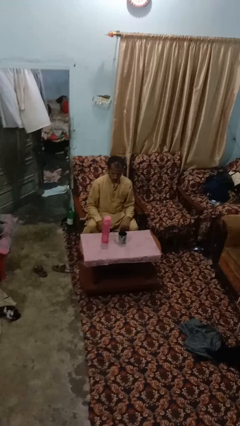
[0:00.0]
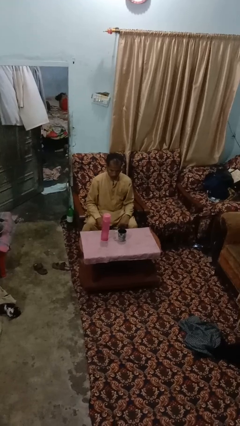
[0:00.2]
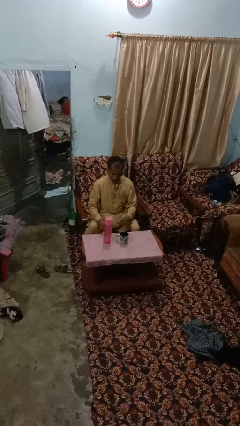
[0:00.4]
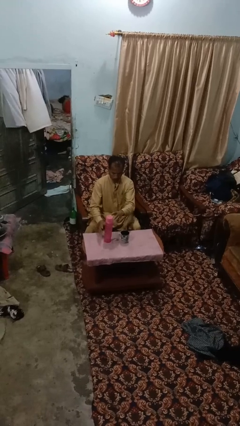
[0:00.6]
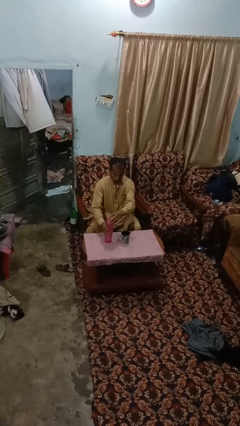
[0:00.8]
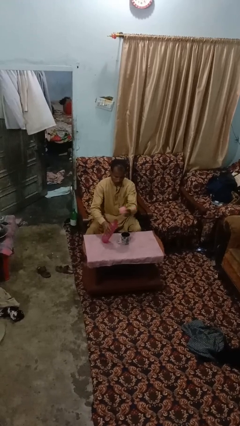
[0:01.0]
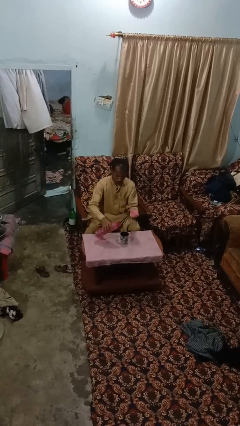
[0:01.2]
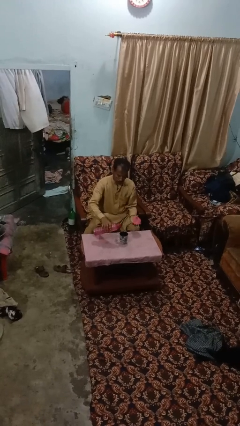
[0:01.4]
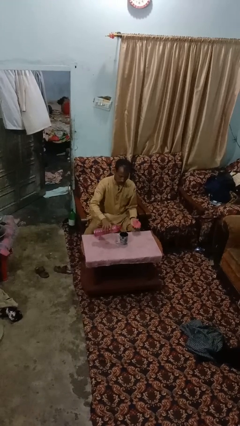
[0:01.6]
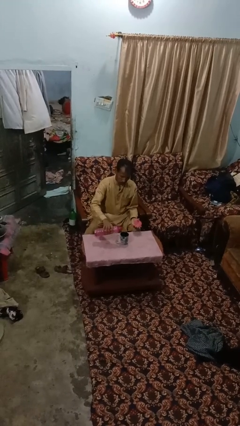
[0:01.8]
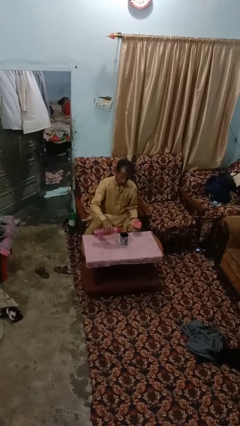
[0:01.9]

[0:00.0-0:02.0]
person pours liquid into cup

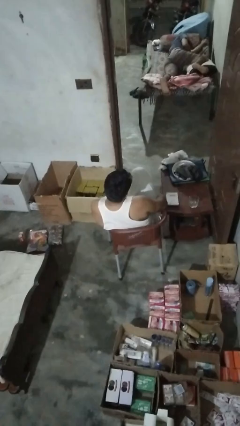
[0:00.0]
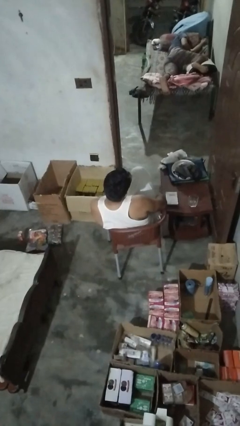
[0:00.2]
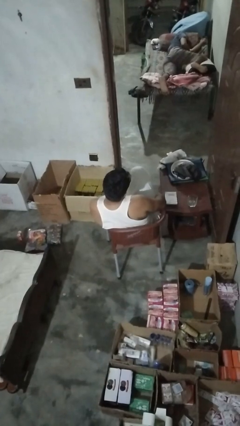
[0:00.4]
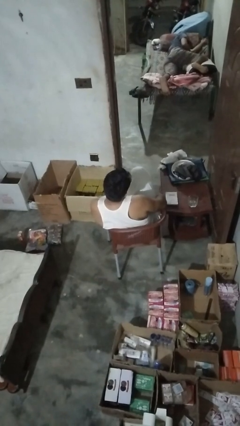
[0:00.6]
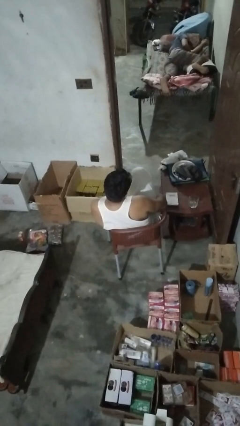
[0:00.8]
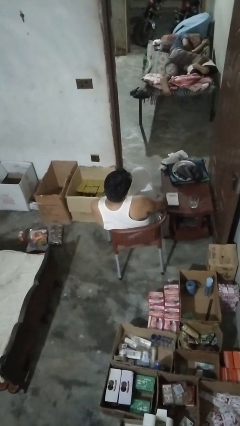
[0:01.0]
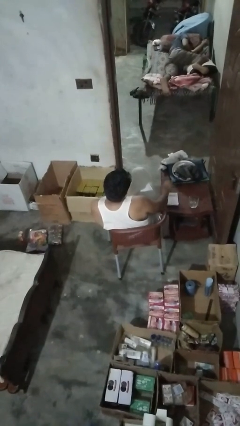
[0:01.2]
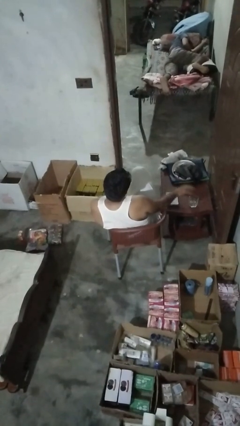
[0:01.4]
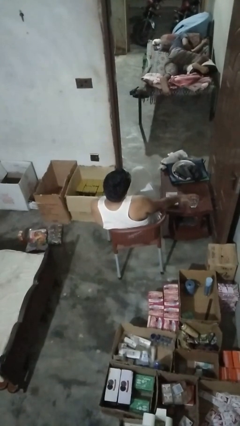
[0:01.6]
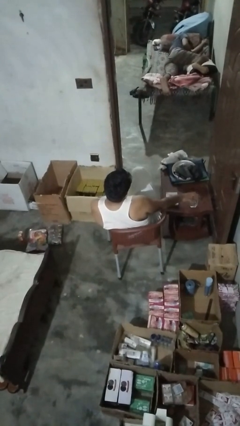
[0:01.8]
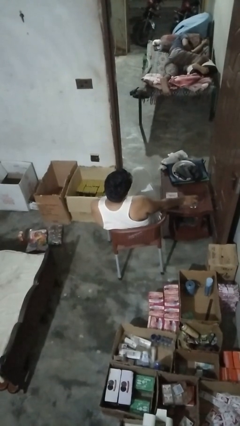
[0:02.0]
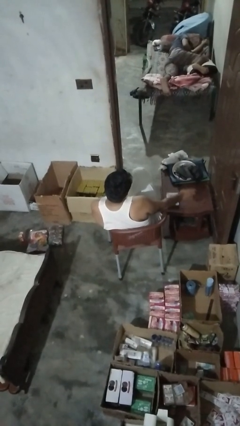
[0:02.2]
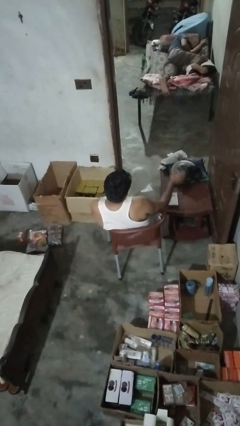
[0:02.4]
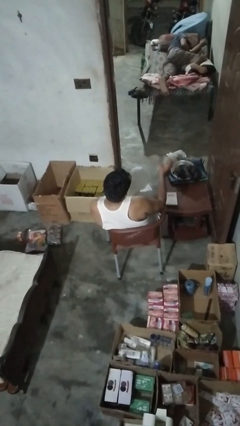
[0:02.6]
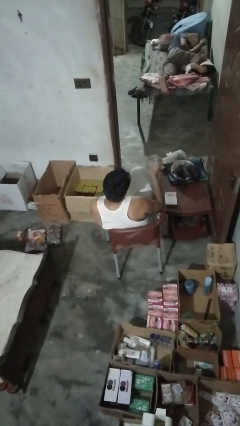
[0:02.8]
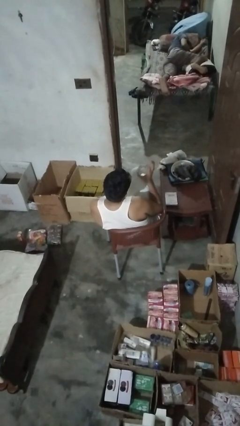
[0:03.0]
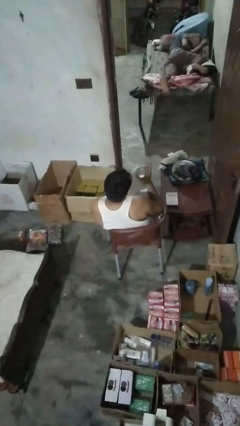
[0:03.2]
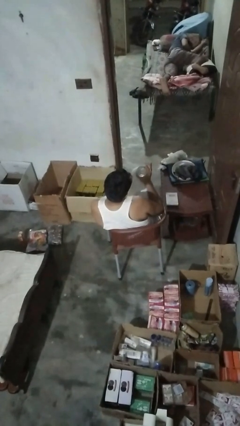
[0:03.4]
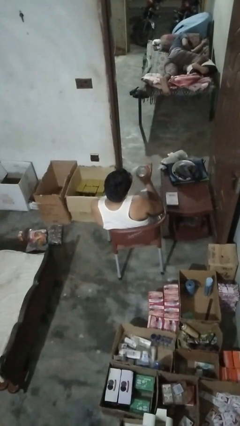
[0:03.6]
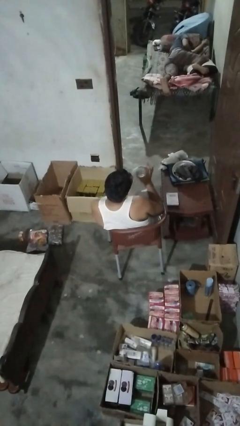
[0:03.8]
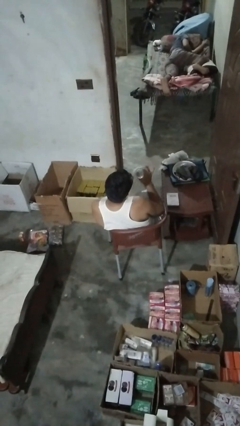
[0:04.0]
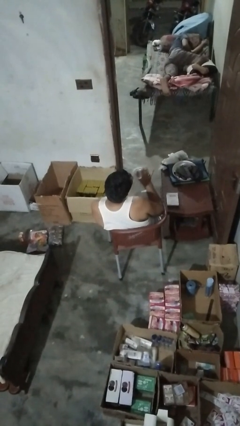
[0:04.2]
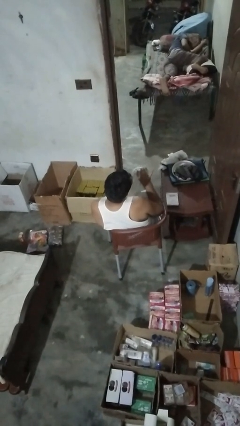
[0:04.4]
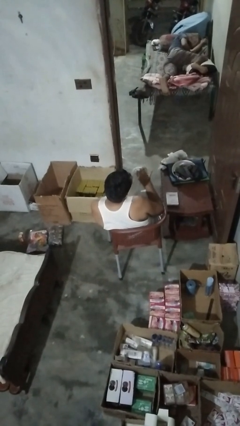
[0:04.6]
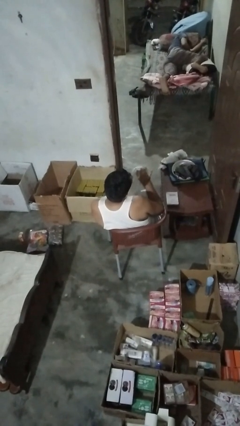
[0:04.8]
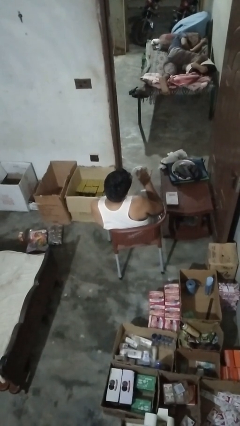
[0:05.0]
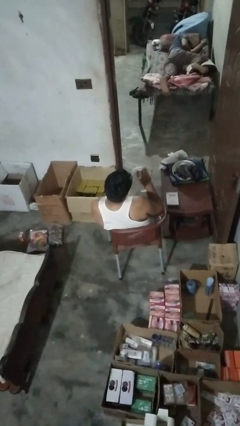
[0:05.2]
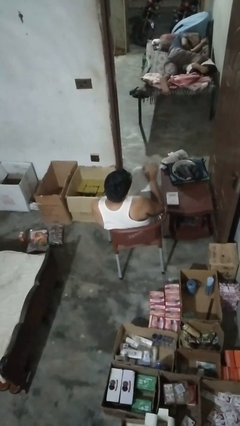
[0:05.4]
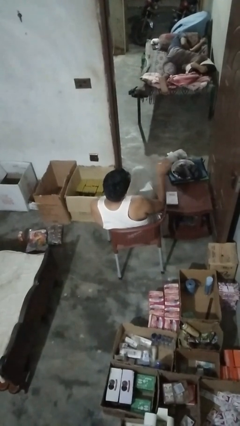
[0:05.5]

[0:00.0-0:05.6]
person knocks over glass

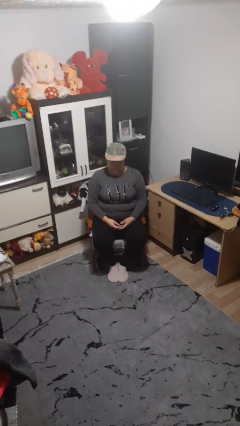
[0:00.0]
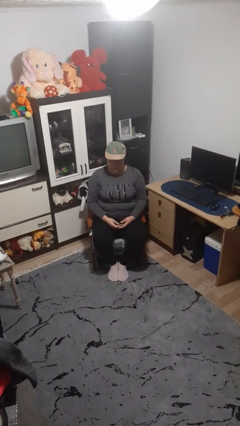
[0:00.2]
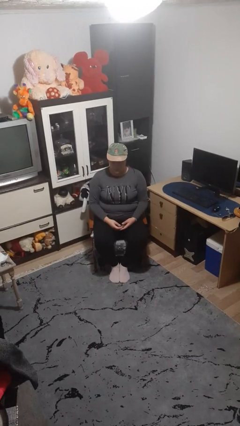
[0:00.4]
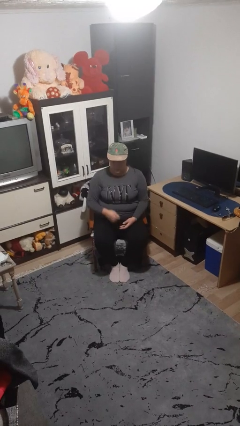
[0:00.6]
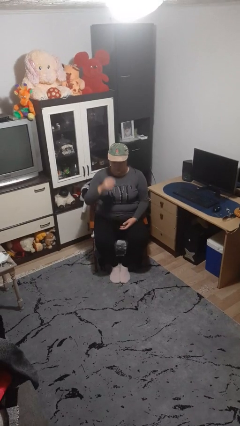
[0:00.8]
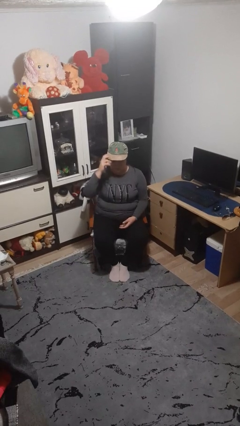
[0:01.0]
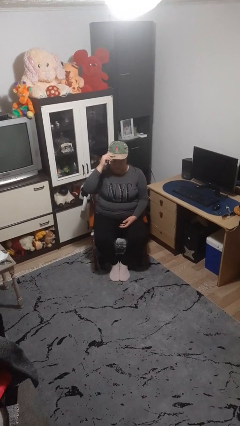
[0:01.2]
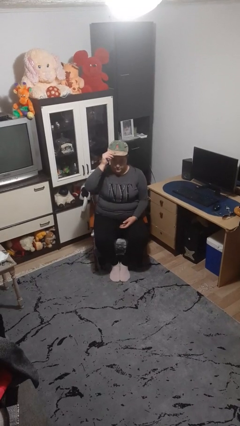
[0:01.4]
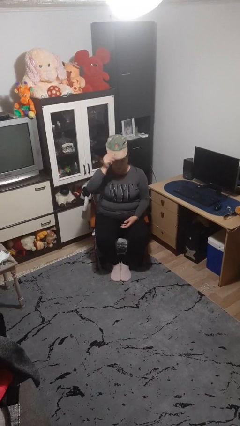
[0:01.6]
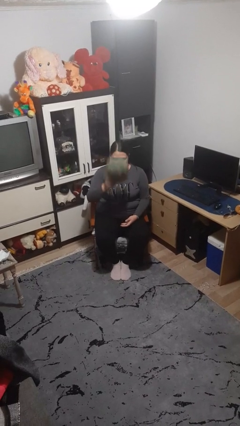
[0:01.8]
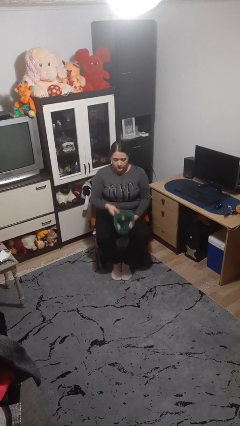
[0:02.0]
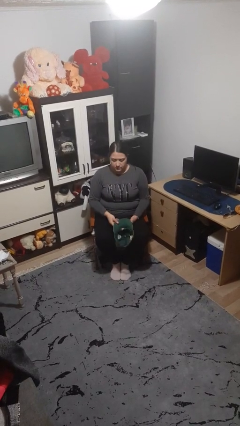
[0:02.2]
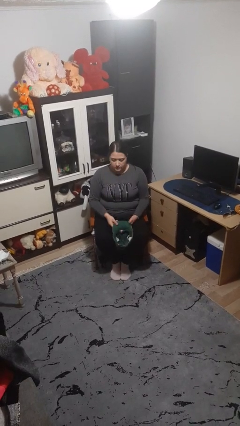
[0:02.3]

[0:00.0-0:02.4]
person takes off hat

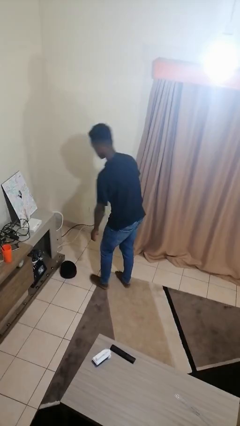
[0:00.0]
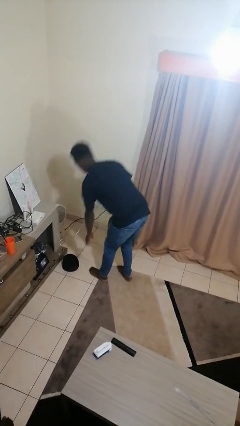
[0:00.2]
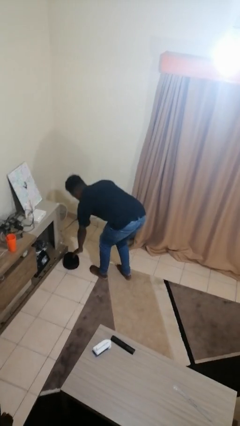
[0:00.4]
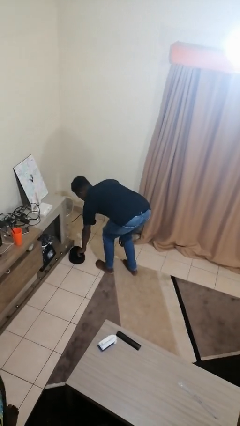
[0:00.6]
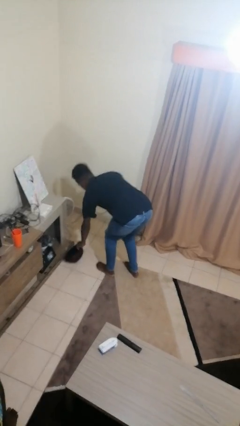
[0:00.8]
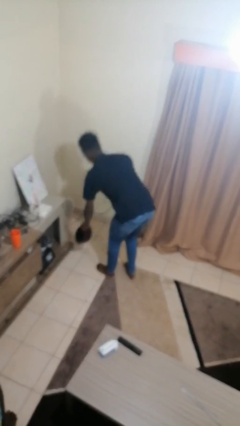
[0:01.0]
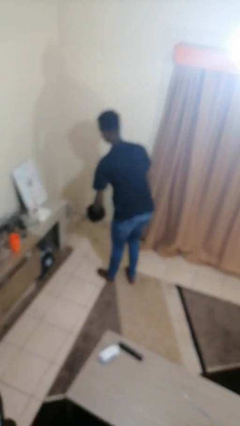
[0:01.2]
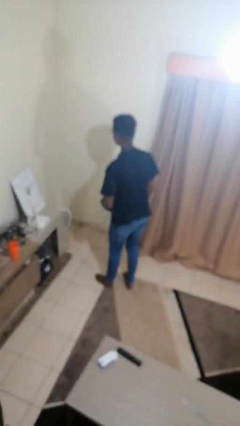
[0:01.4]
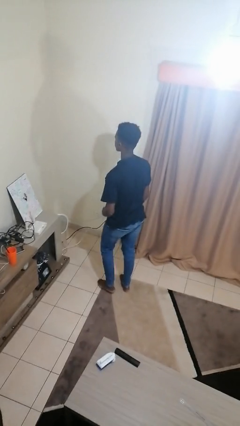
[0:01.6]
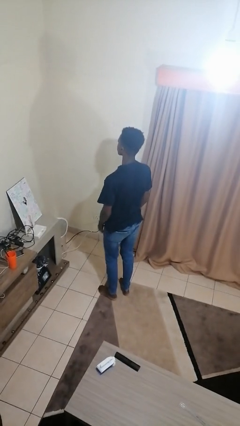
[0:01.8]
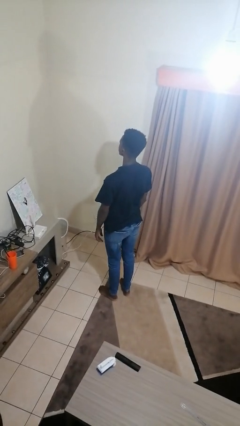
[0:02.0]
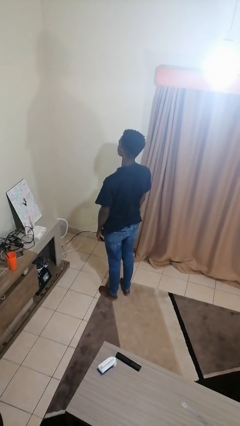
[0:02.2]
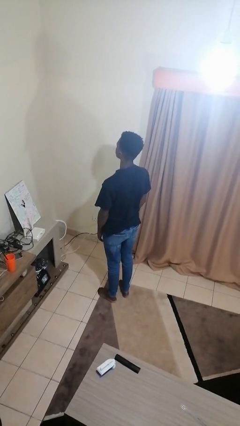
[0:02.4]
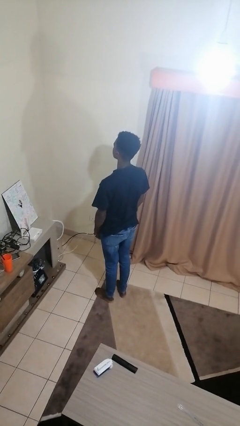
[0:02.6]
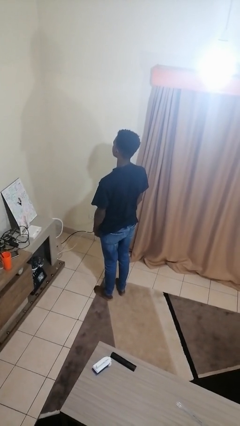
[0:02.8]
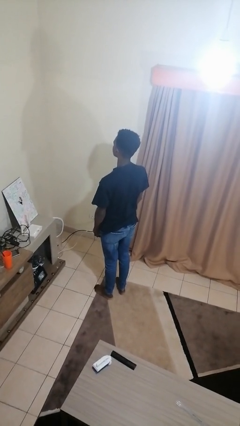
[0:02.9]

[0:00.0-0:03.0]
person picks up object from floor

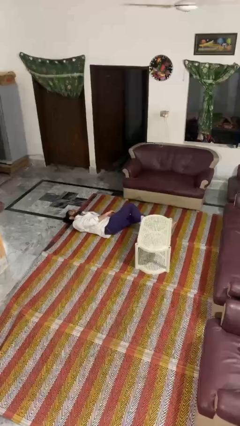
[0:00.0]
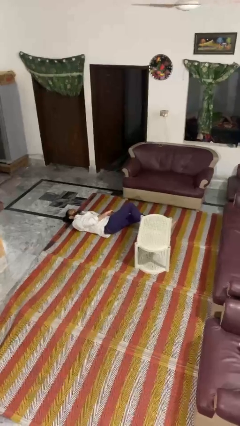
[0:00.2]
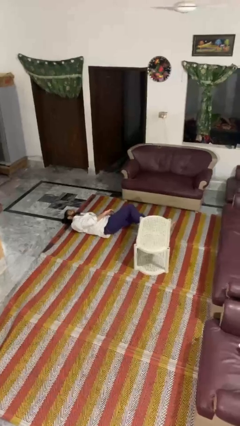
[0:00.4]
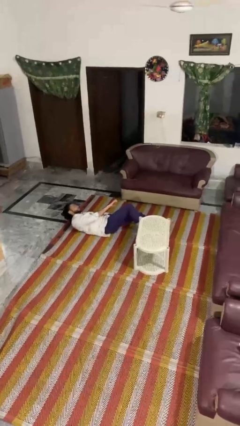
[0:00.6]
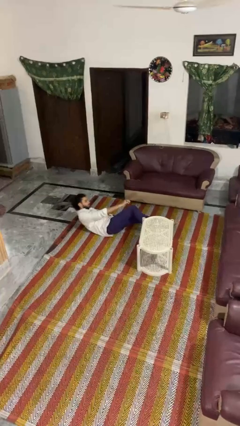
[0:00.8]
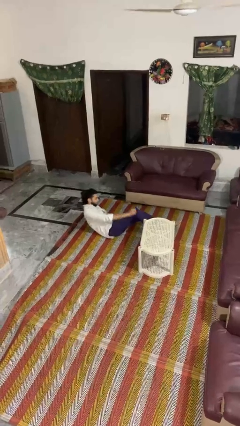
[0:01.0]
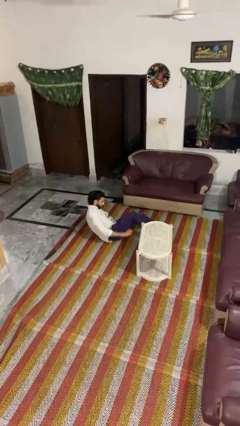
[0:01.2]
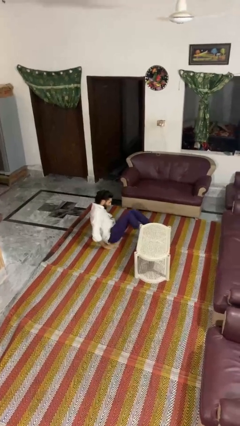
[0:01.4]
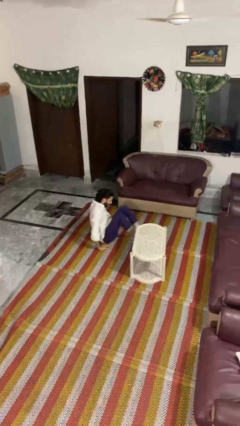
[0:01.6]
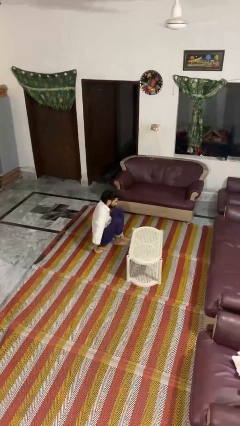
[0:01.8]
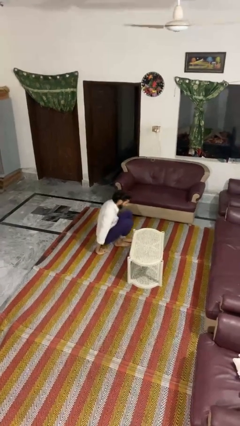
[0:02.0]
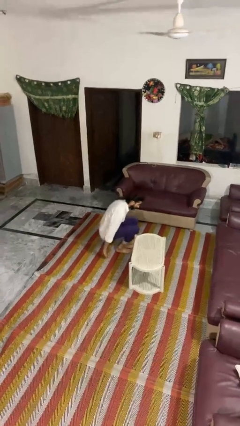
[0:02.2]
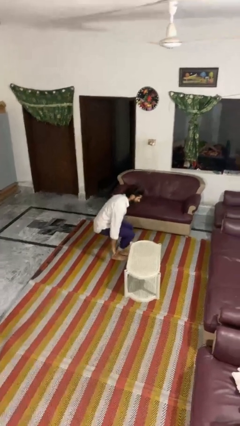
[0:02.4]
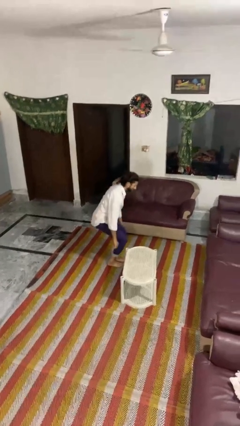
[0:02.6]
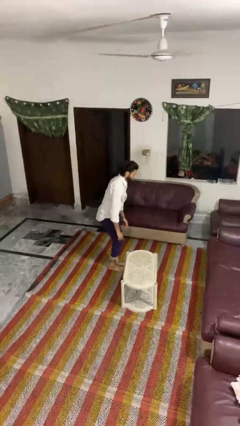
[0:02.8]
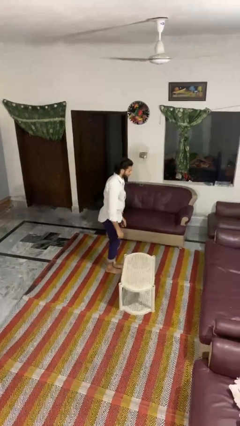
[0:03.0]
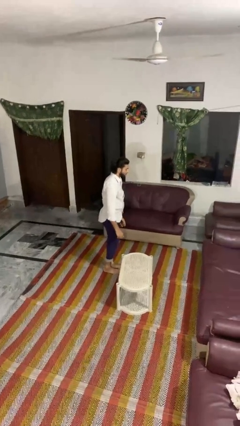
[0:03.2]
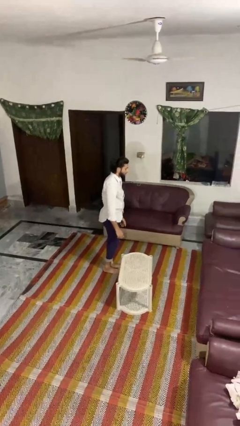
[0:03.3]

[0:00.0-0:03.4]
person stands up from floor

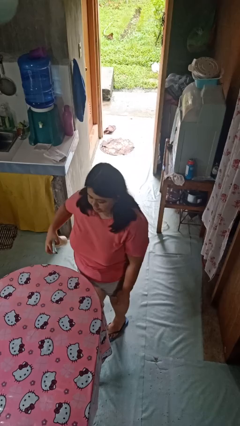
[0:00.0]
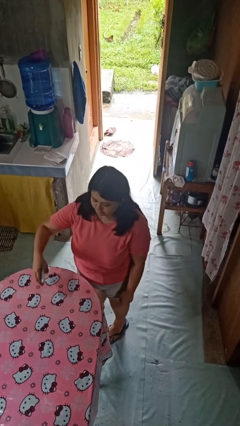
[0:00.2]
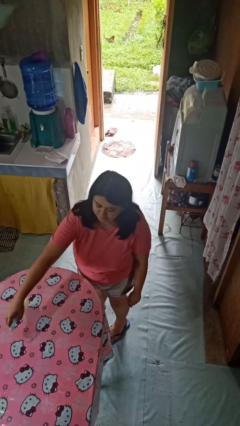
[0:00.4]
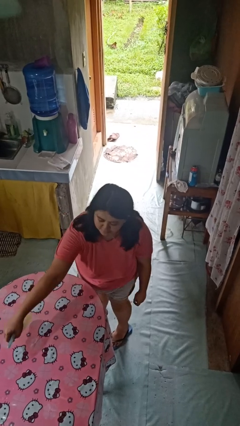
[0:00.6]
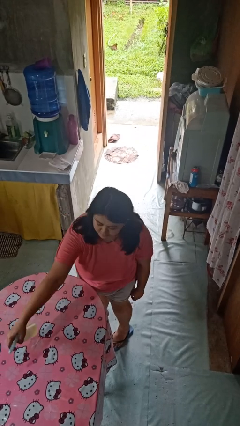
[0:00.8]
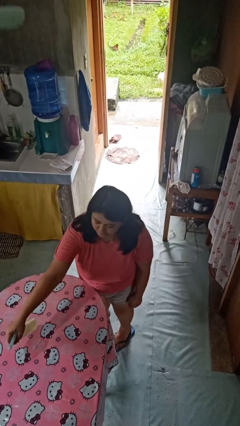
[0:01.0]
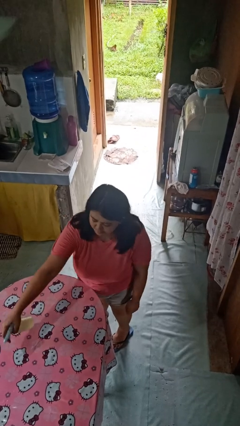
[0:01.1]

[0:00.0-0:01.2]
person sprays from bottle
